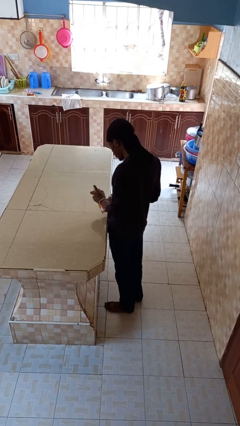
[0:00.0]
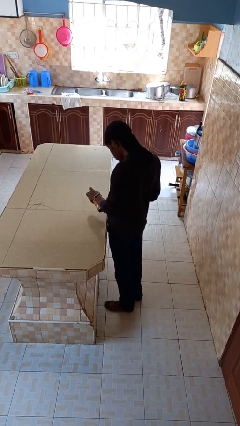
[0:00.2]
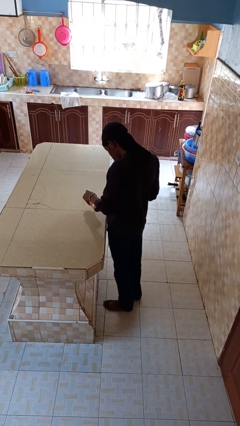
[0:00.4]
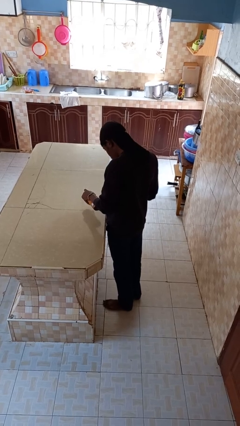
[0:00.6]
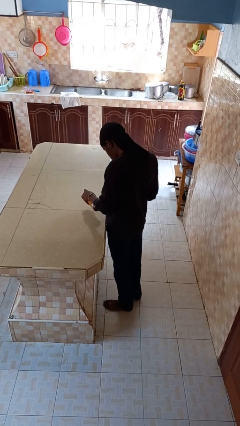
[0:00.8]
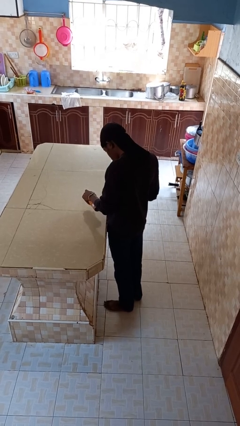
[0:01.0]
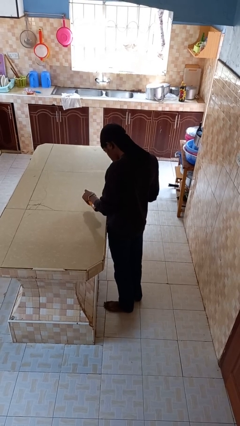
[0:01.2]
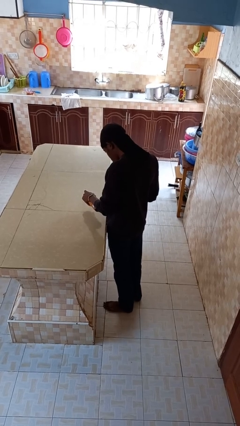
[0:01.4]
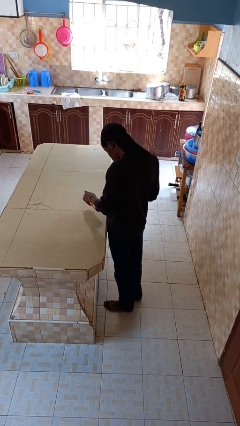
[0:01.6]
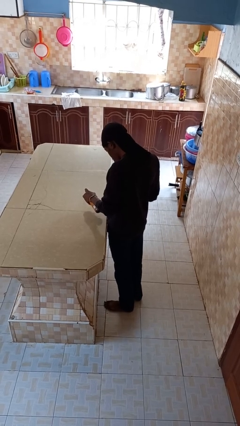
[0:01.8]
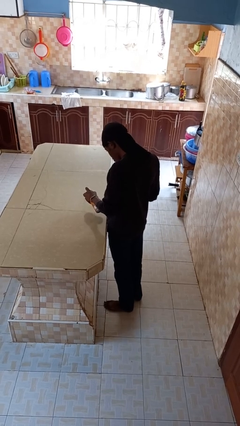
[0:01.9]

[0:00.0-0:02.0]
person sprays from bottle

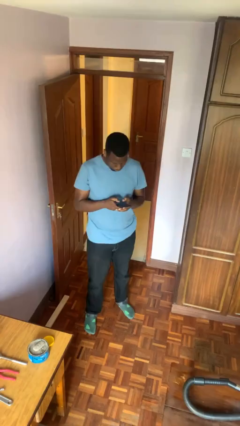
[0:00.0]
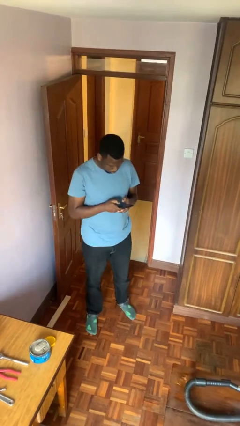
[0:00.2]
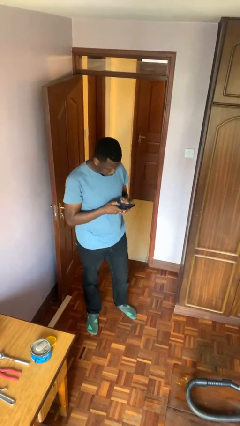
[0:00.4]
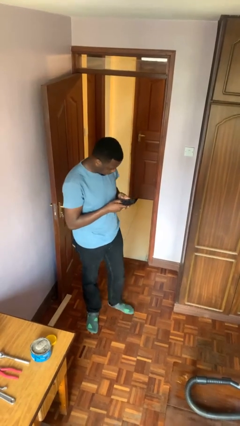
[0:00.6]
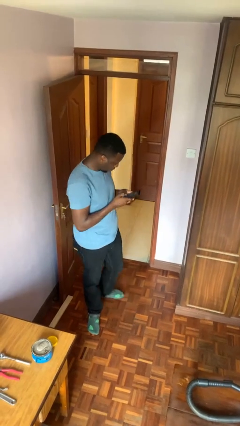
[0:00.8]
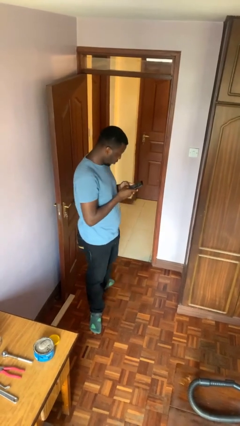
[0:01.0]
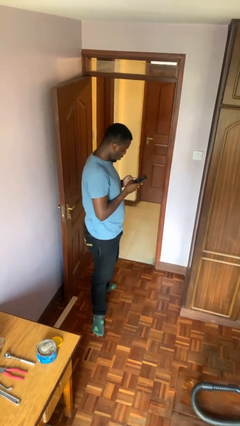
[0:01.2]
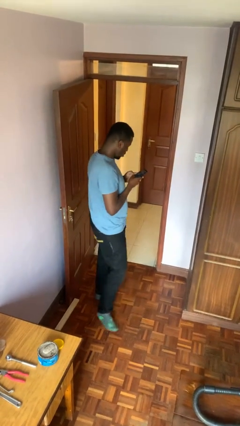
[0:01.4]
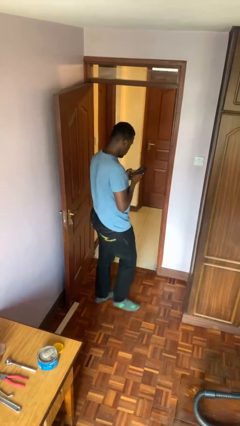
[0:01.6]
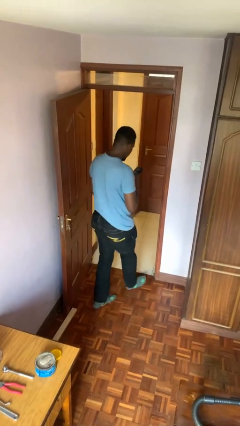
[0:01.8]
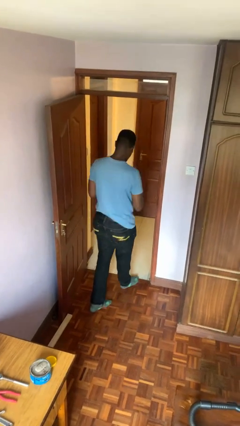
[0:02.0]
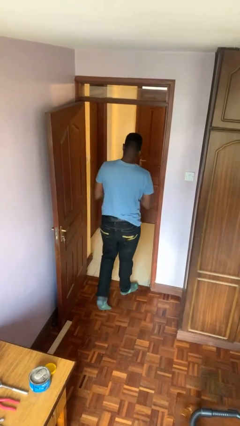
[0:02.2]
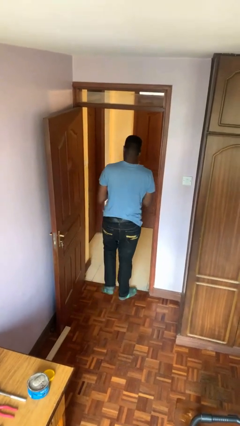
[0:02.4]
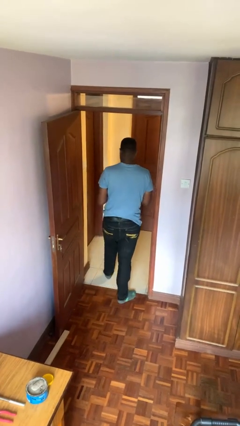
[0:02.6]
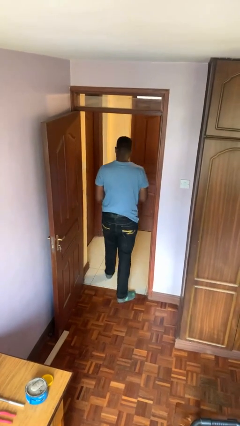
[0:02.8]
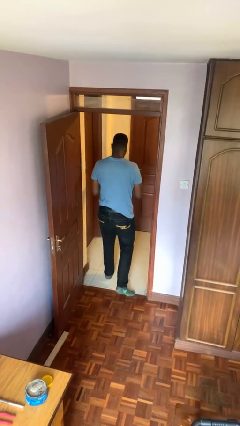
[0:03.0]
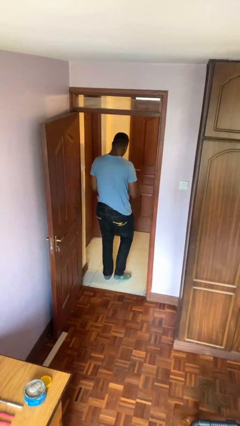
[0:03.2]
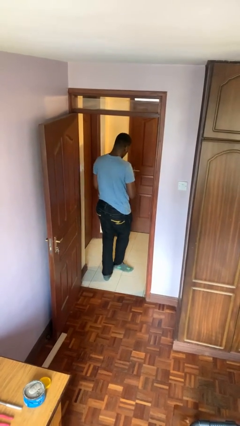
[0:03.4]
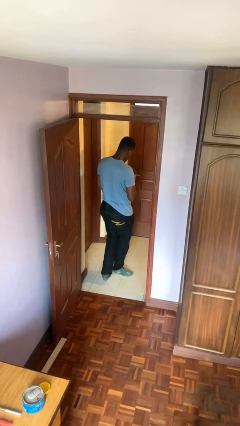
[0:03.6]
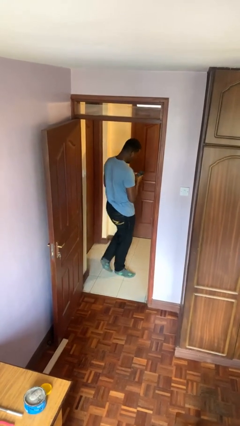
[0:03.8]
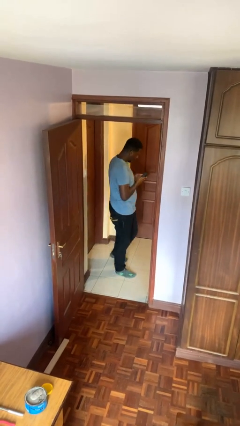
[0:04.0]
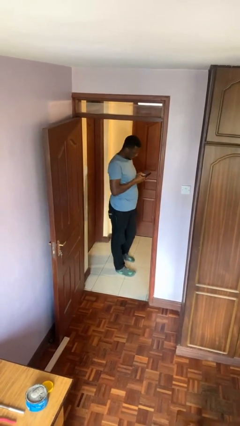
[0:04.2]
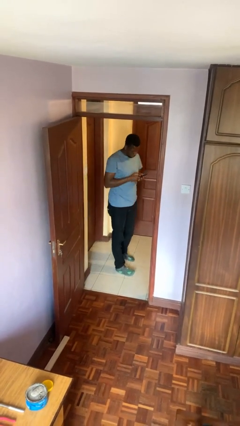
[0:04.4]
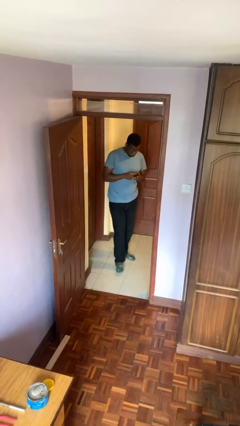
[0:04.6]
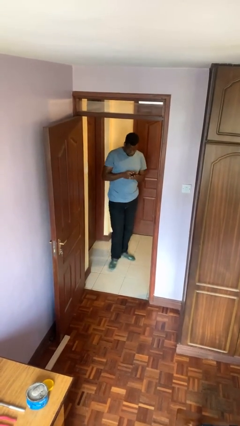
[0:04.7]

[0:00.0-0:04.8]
person exits scene through structure

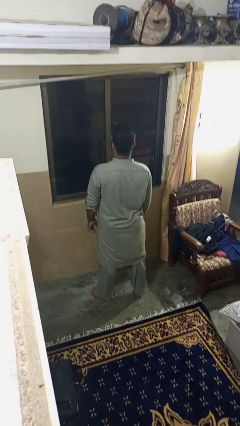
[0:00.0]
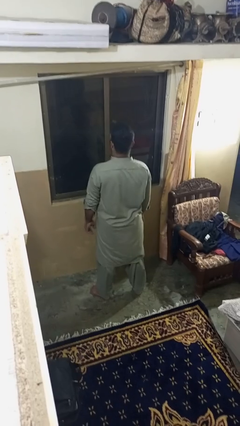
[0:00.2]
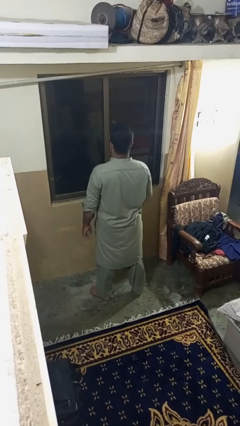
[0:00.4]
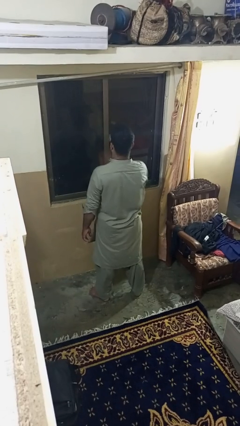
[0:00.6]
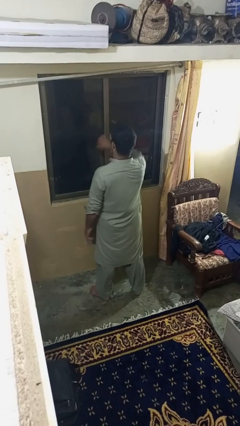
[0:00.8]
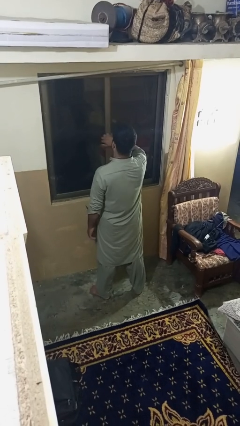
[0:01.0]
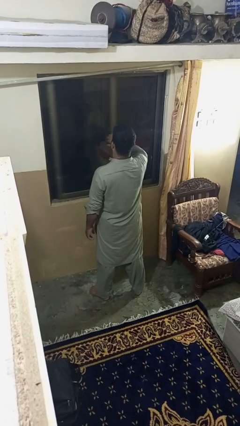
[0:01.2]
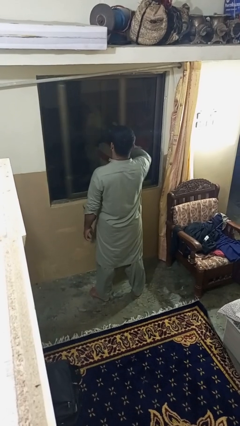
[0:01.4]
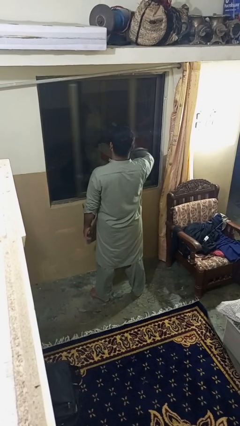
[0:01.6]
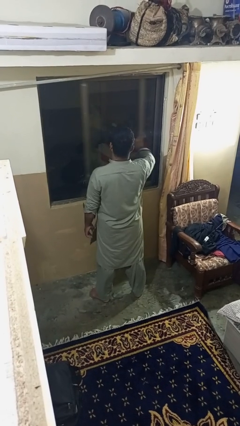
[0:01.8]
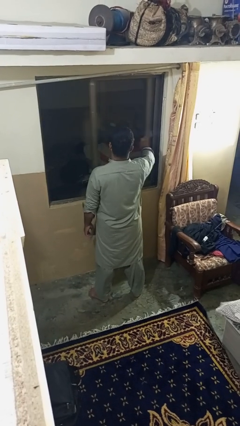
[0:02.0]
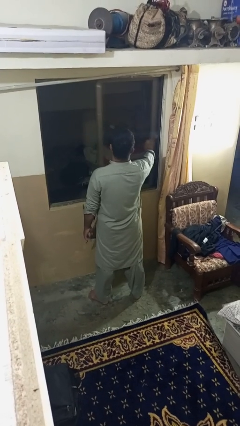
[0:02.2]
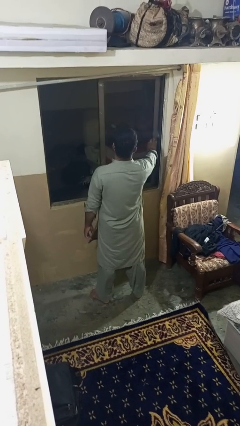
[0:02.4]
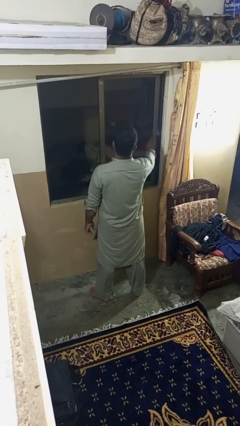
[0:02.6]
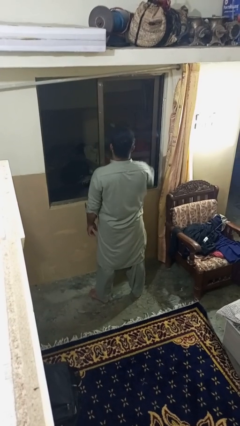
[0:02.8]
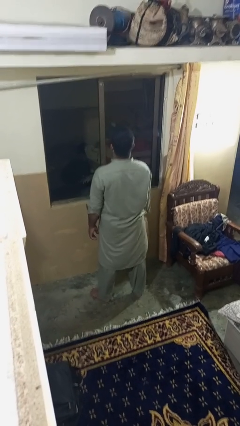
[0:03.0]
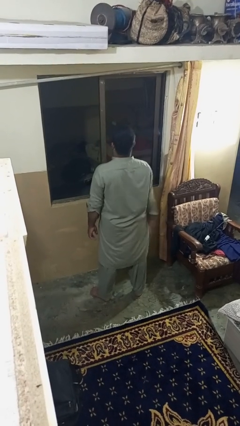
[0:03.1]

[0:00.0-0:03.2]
person opens home window

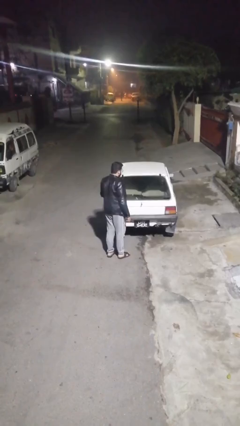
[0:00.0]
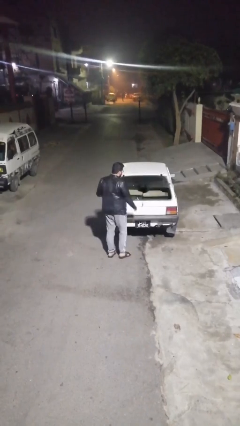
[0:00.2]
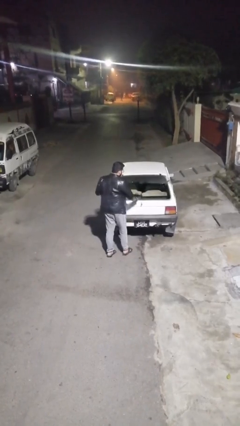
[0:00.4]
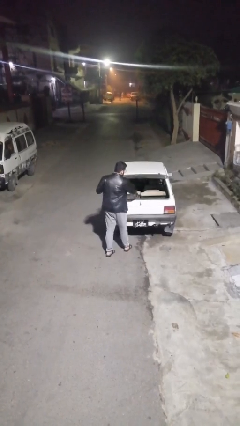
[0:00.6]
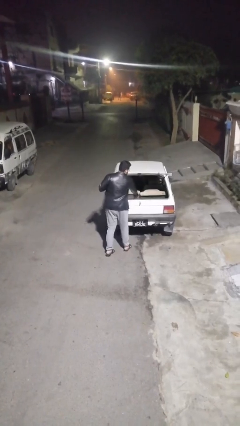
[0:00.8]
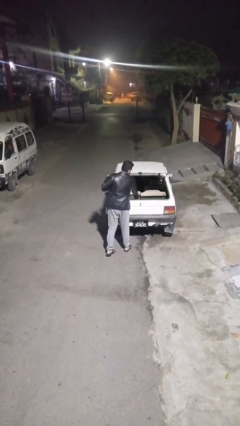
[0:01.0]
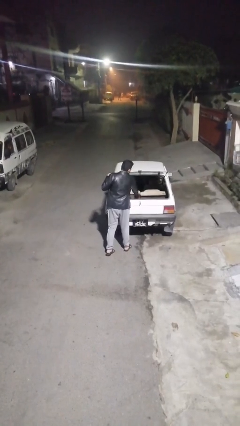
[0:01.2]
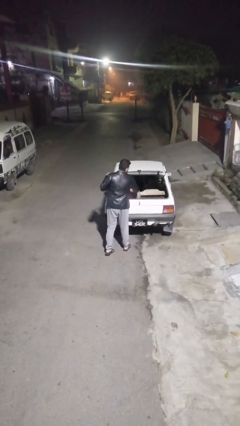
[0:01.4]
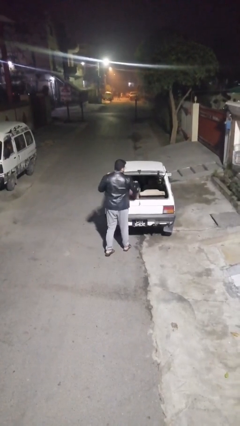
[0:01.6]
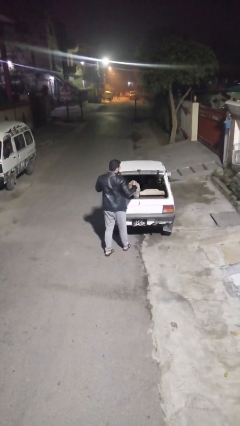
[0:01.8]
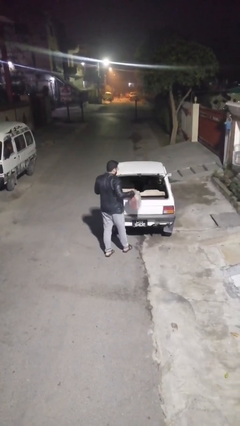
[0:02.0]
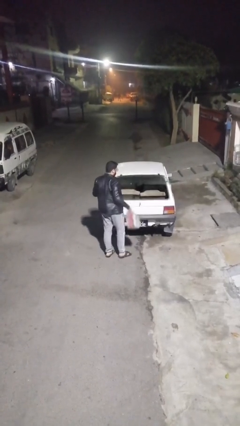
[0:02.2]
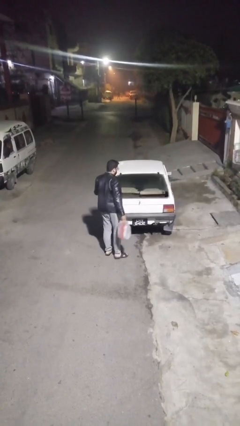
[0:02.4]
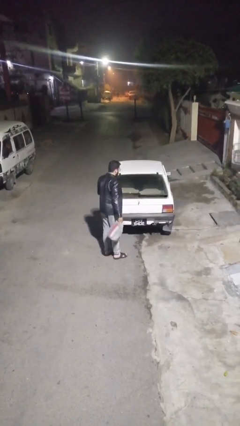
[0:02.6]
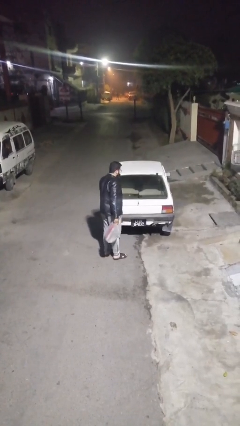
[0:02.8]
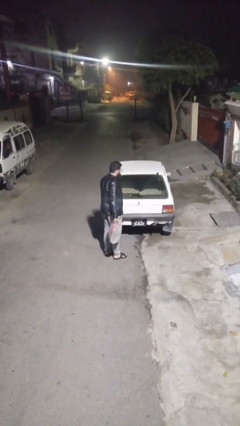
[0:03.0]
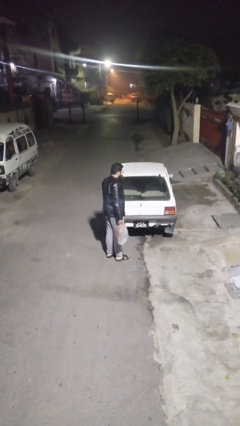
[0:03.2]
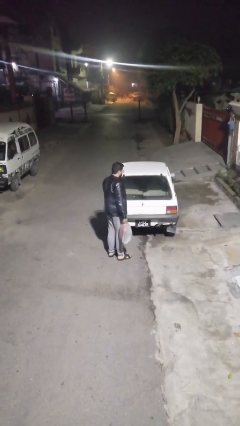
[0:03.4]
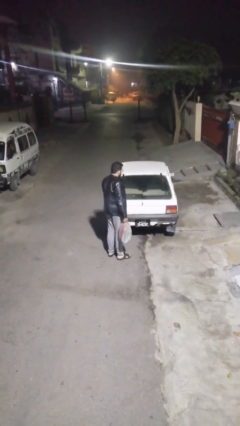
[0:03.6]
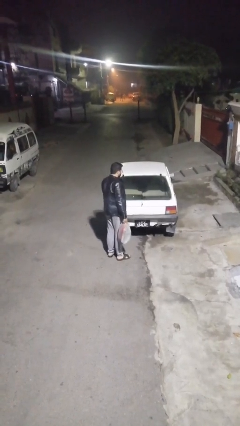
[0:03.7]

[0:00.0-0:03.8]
person unloads car

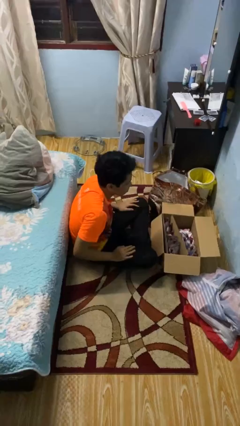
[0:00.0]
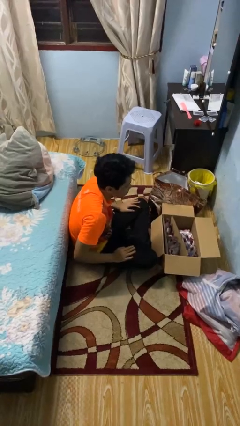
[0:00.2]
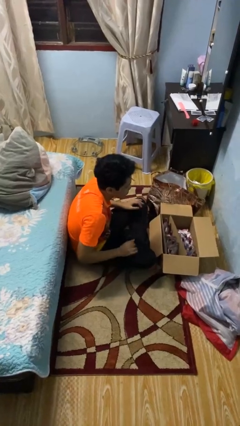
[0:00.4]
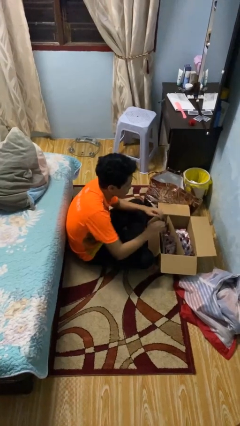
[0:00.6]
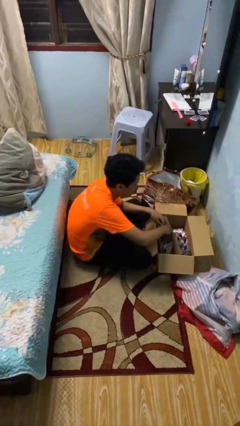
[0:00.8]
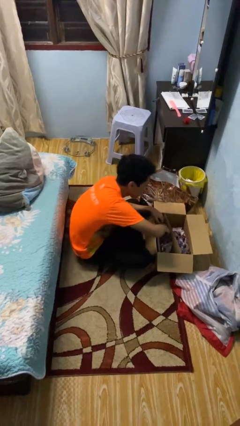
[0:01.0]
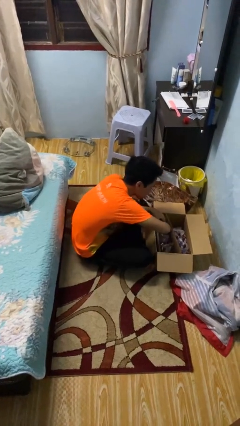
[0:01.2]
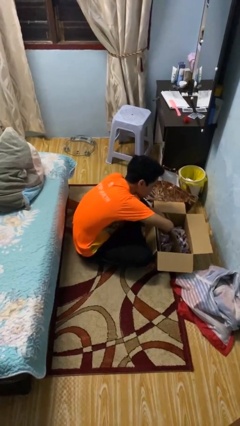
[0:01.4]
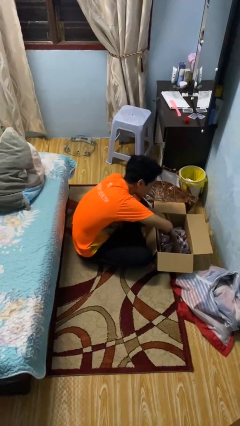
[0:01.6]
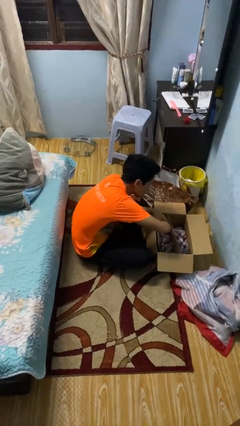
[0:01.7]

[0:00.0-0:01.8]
person searches in bag

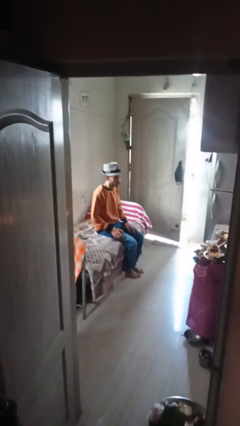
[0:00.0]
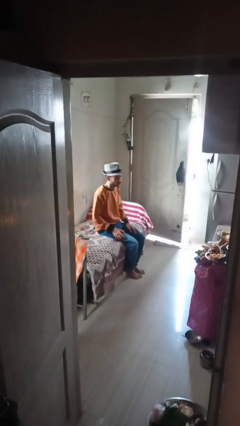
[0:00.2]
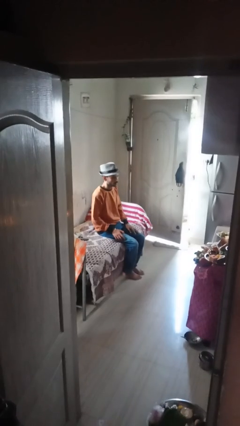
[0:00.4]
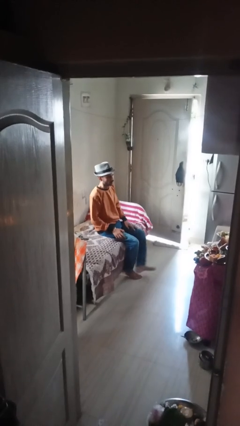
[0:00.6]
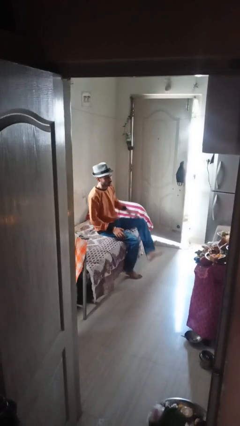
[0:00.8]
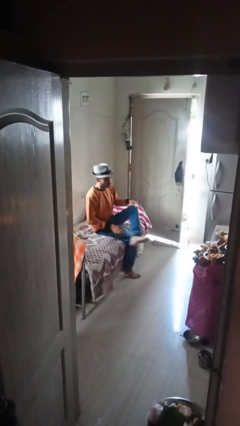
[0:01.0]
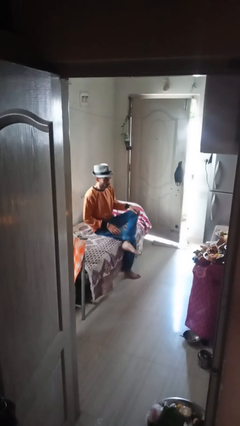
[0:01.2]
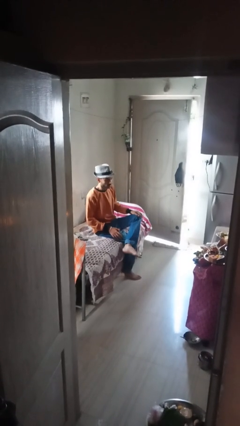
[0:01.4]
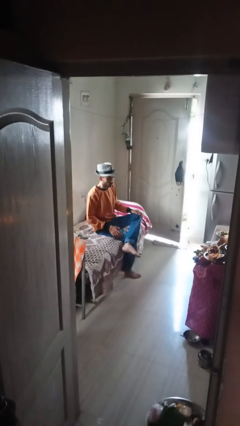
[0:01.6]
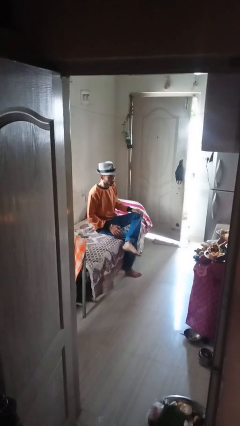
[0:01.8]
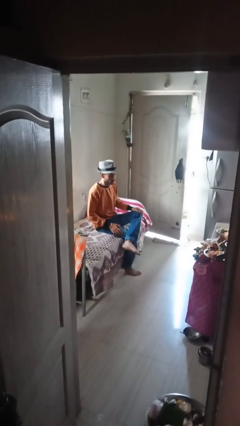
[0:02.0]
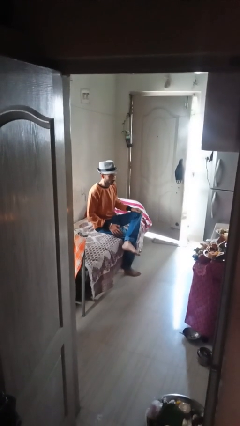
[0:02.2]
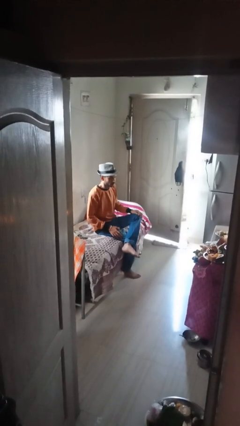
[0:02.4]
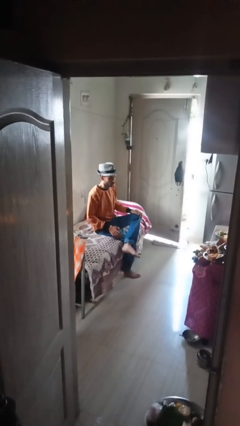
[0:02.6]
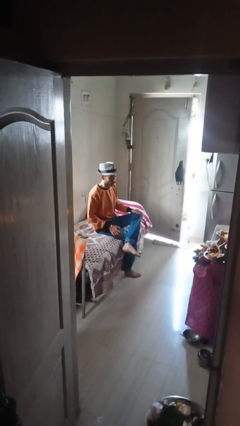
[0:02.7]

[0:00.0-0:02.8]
person crosses legs
